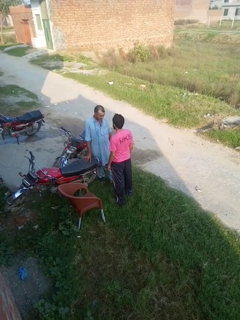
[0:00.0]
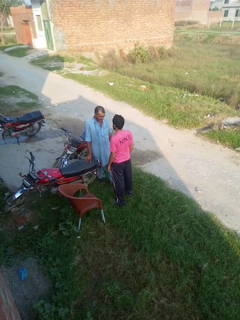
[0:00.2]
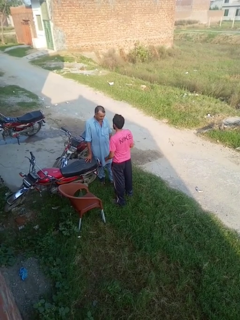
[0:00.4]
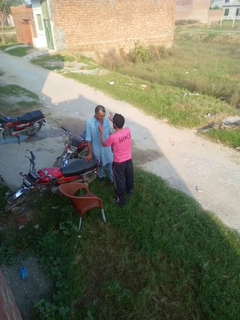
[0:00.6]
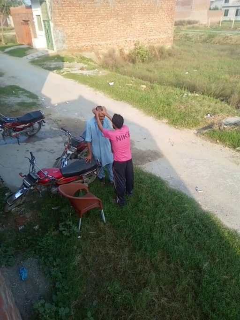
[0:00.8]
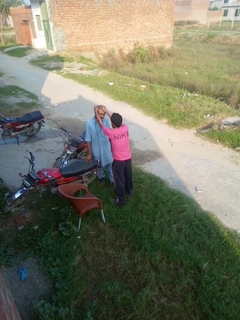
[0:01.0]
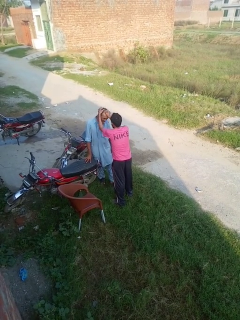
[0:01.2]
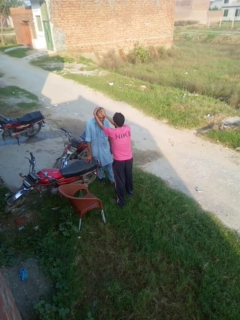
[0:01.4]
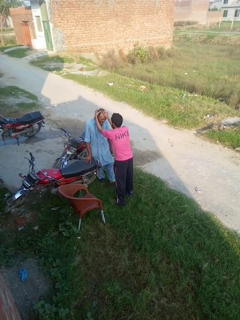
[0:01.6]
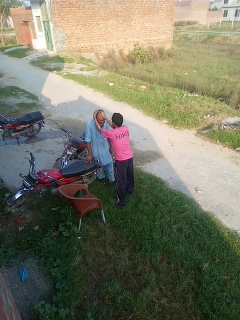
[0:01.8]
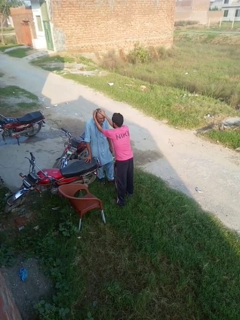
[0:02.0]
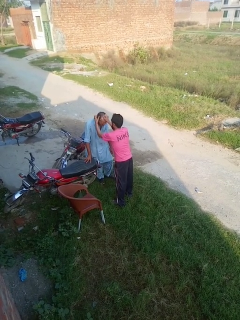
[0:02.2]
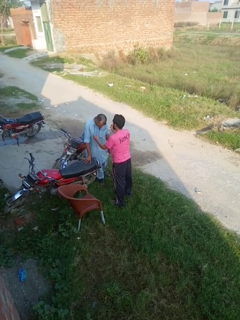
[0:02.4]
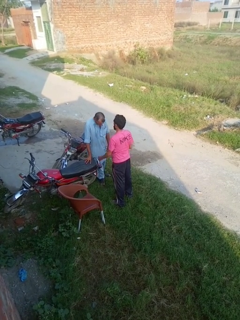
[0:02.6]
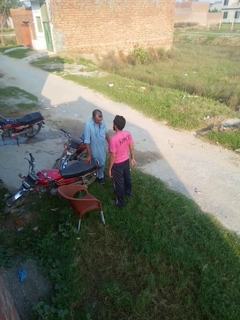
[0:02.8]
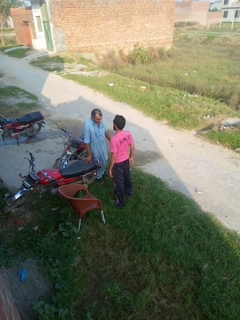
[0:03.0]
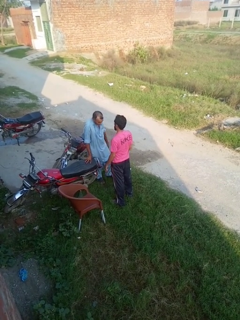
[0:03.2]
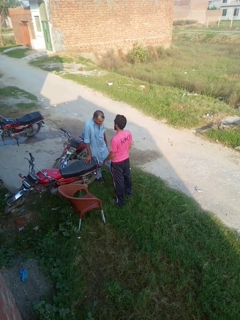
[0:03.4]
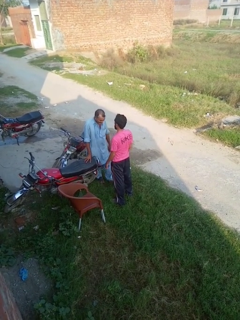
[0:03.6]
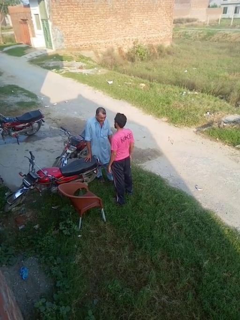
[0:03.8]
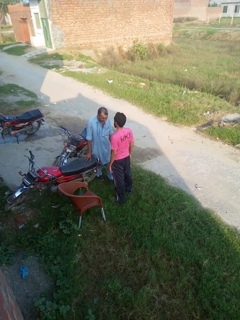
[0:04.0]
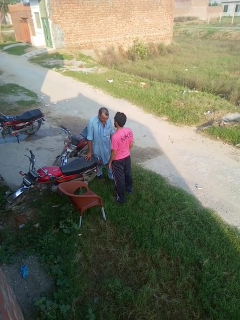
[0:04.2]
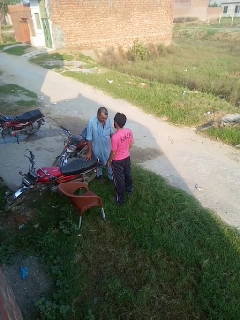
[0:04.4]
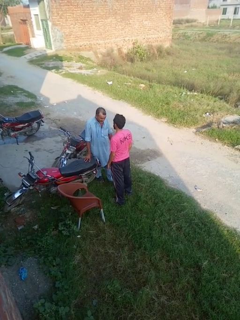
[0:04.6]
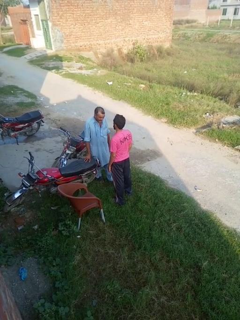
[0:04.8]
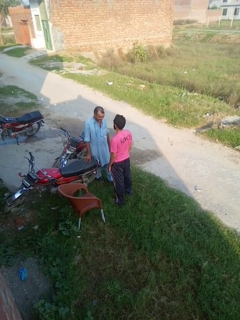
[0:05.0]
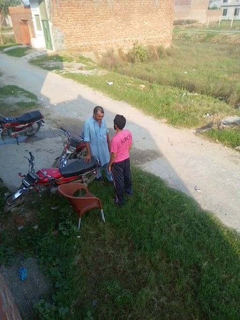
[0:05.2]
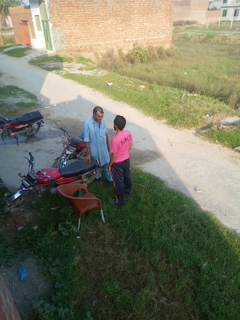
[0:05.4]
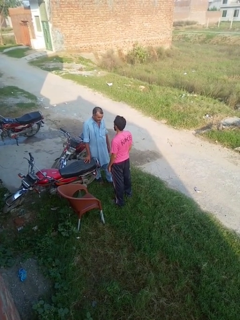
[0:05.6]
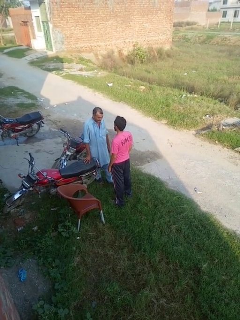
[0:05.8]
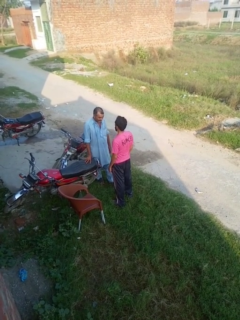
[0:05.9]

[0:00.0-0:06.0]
person grabs person by hair

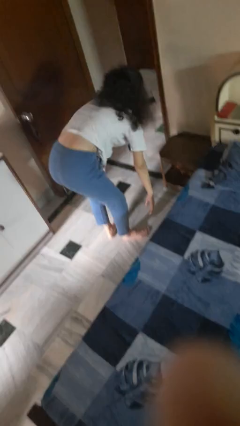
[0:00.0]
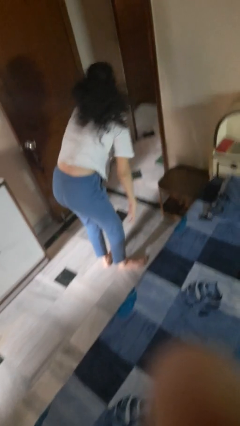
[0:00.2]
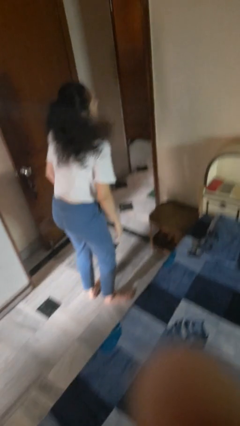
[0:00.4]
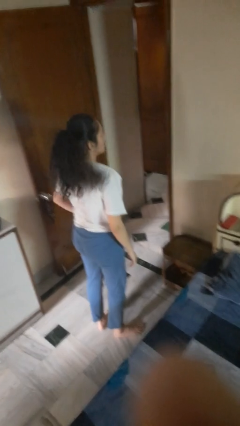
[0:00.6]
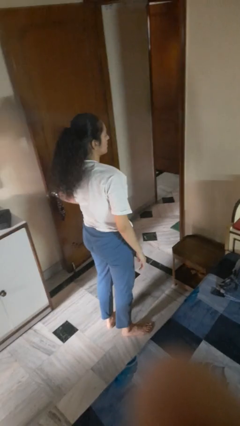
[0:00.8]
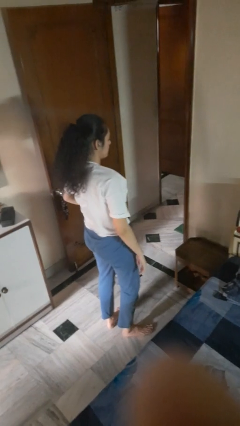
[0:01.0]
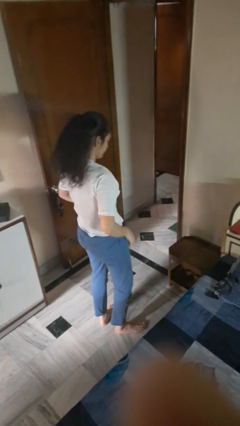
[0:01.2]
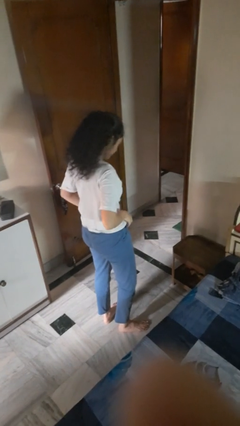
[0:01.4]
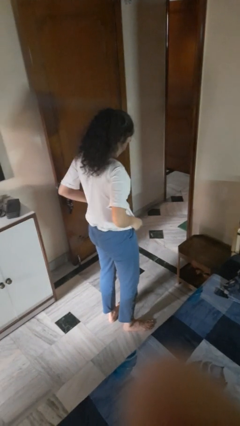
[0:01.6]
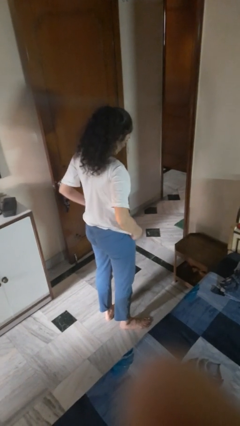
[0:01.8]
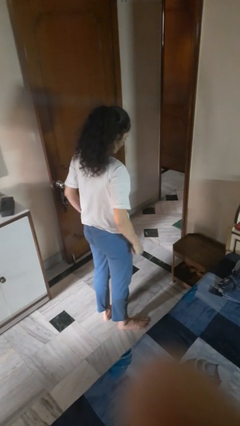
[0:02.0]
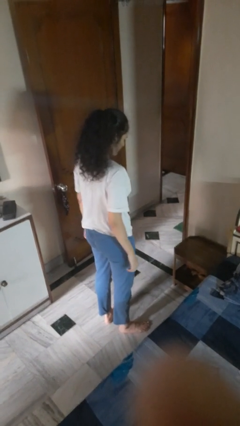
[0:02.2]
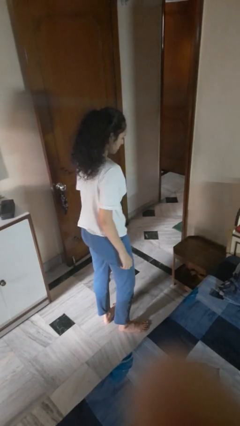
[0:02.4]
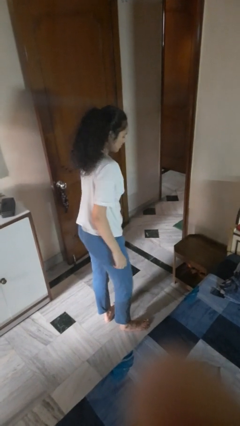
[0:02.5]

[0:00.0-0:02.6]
person stands up from floor

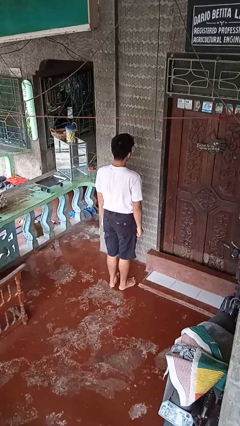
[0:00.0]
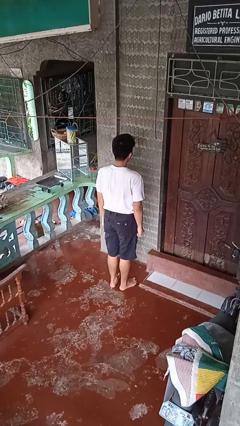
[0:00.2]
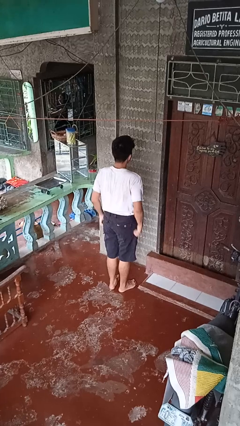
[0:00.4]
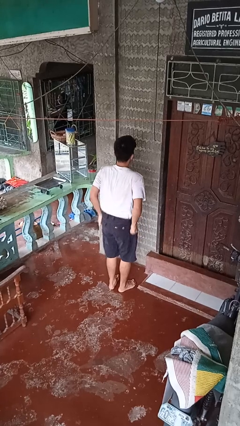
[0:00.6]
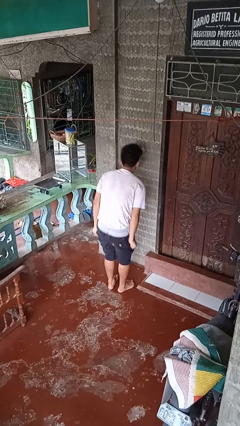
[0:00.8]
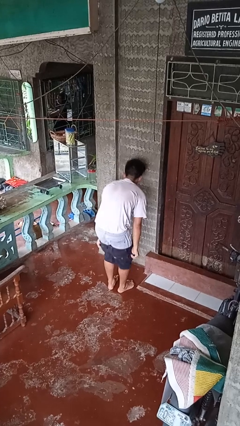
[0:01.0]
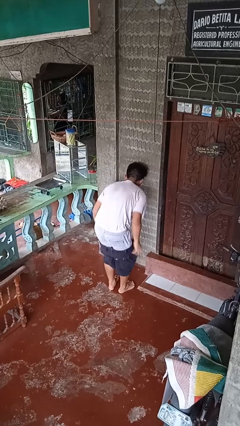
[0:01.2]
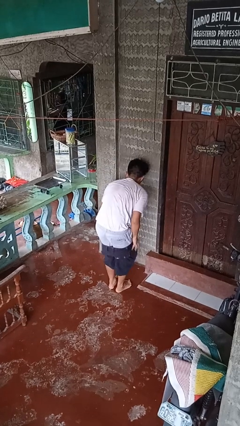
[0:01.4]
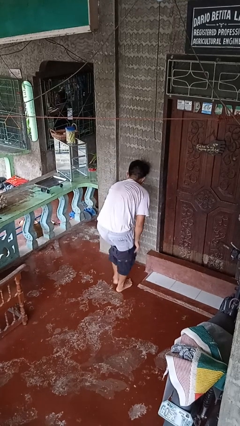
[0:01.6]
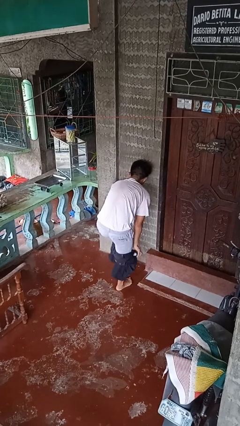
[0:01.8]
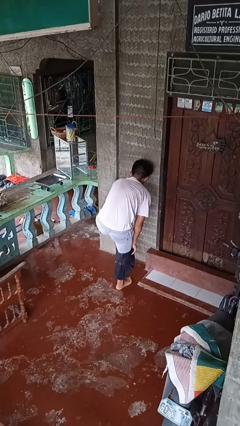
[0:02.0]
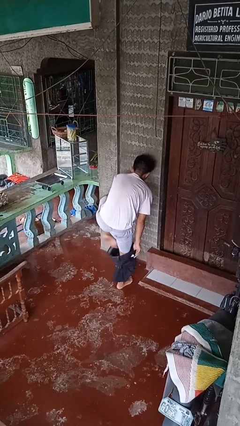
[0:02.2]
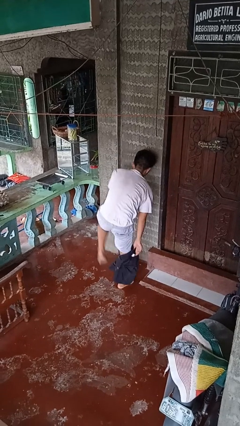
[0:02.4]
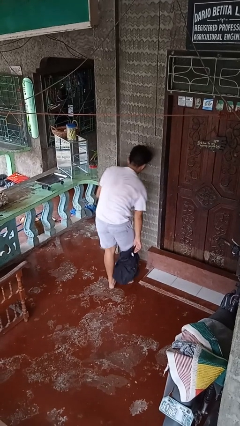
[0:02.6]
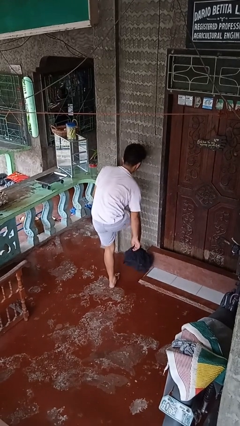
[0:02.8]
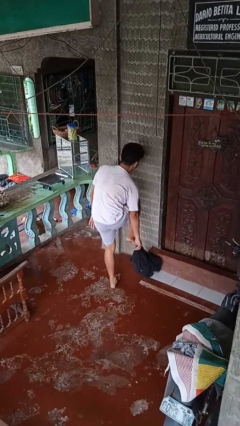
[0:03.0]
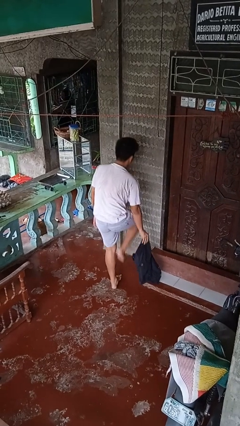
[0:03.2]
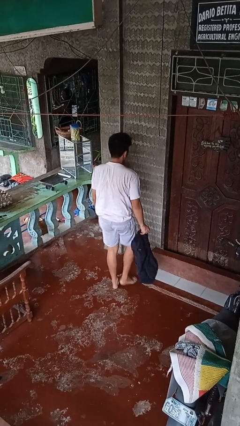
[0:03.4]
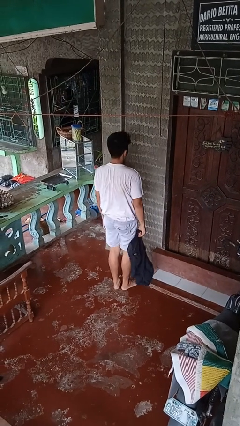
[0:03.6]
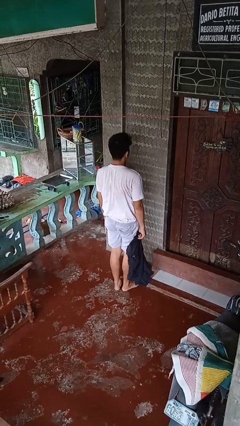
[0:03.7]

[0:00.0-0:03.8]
person takes off pants

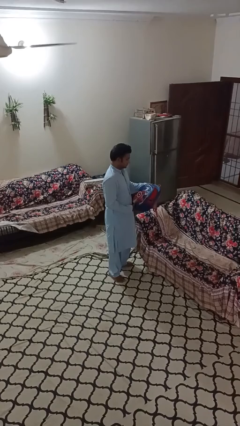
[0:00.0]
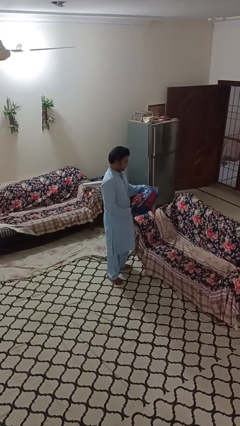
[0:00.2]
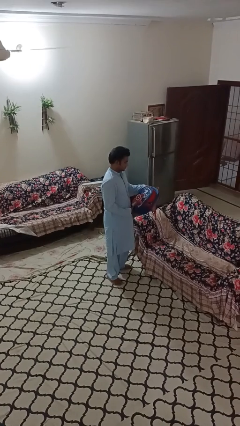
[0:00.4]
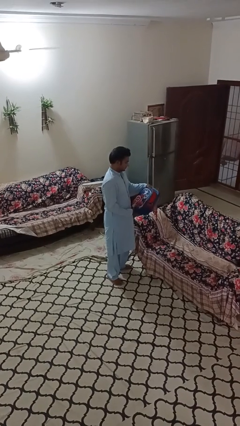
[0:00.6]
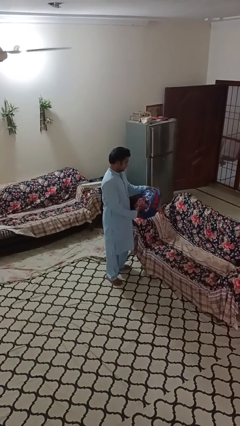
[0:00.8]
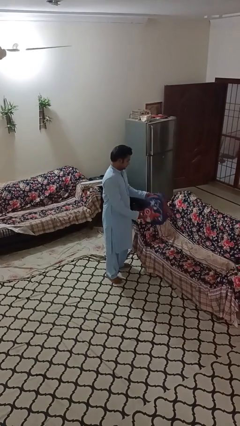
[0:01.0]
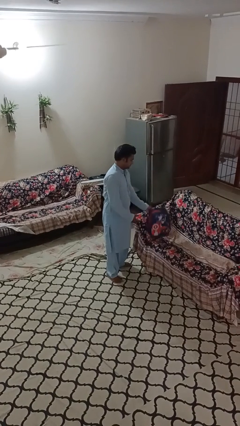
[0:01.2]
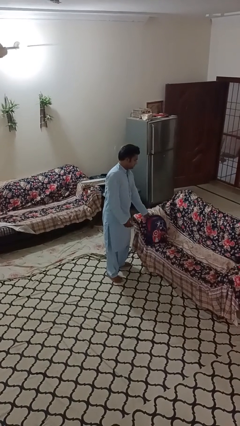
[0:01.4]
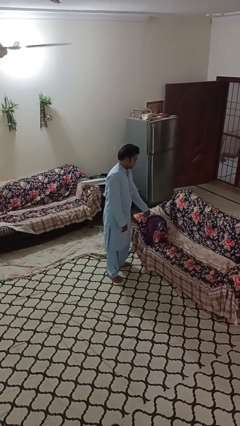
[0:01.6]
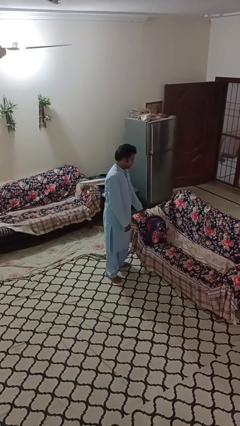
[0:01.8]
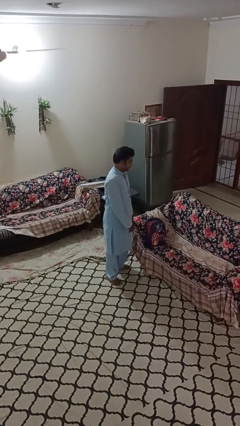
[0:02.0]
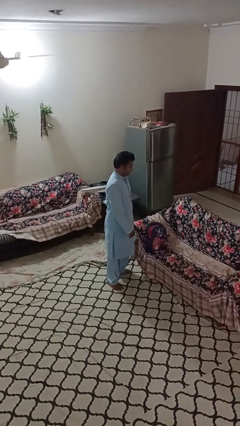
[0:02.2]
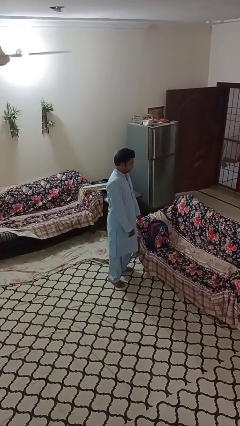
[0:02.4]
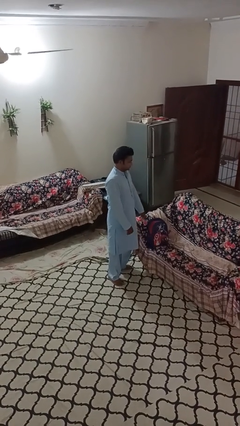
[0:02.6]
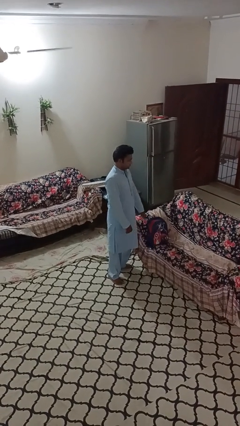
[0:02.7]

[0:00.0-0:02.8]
person puts down object on couch

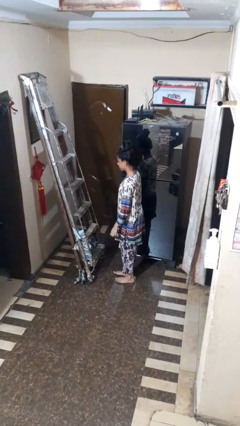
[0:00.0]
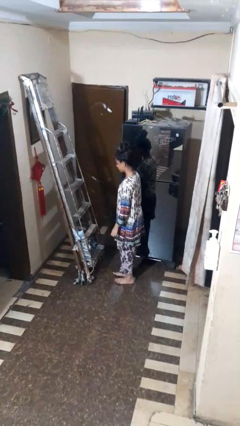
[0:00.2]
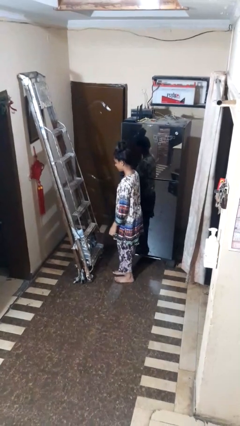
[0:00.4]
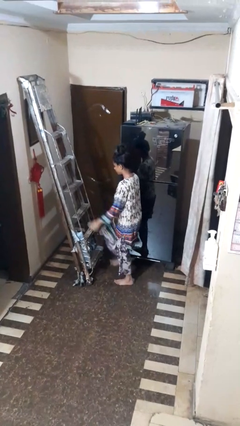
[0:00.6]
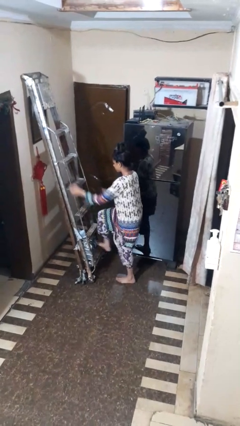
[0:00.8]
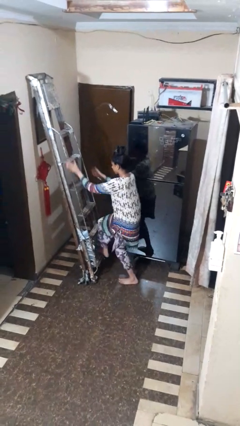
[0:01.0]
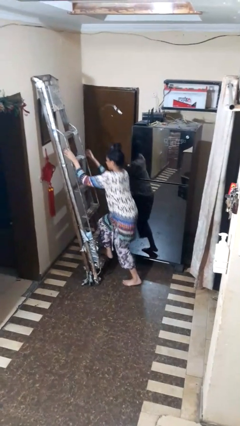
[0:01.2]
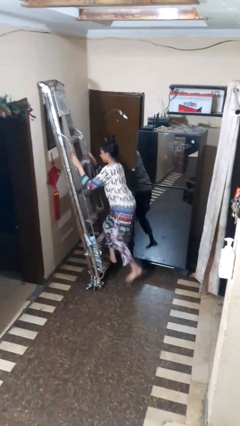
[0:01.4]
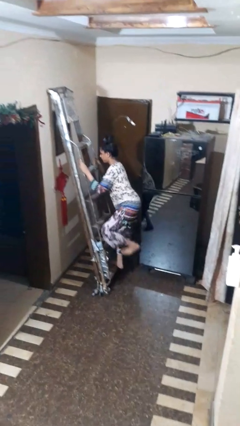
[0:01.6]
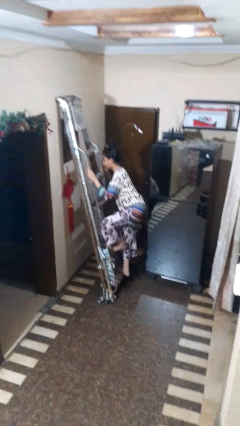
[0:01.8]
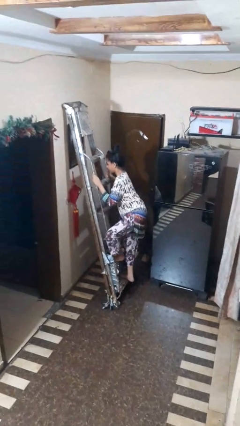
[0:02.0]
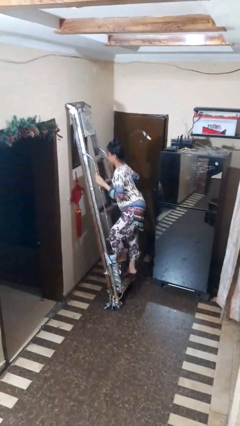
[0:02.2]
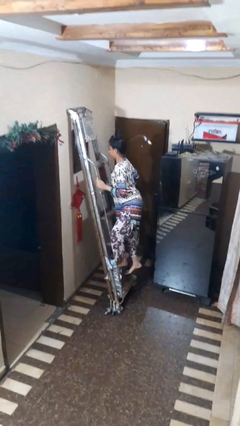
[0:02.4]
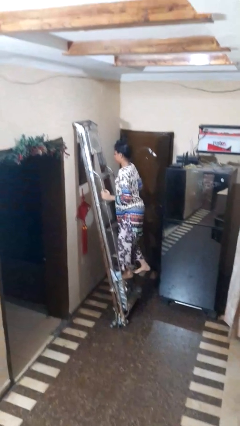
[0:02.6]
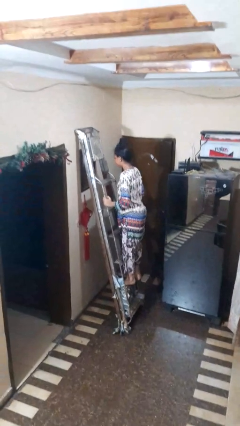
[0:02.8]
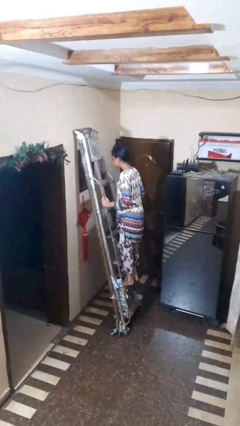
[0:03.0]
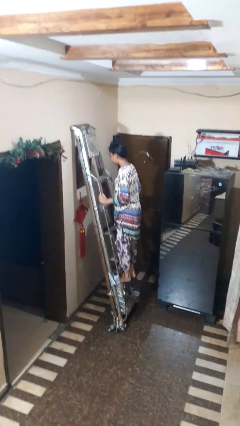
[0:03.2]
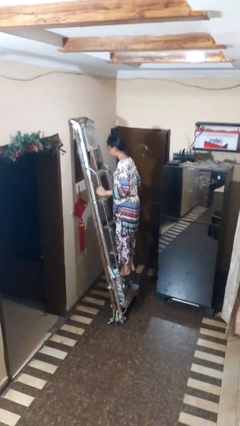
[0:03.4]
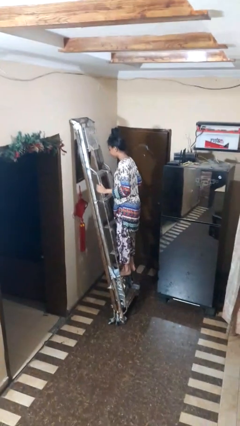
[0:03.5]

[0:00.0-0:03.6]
person climbs up ladder

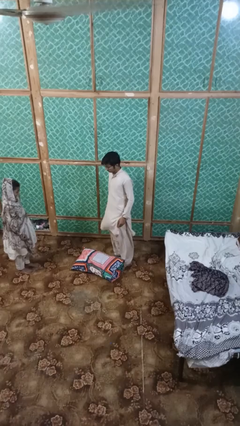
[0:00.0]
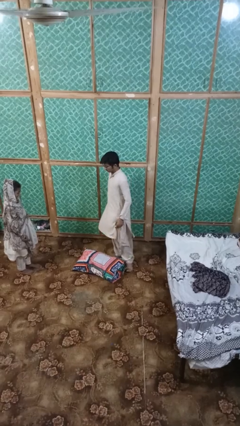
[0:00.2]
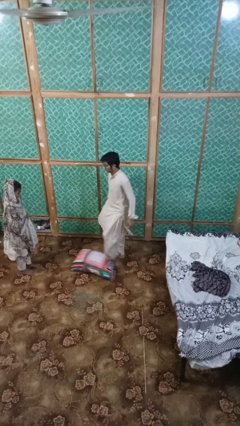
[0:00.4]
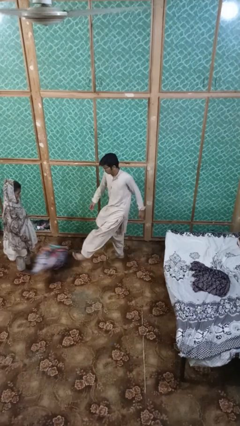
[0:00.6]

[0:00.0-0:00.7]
person kicks object to person
